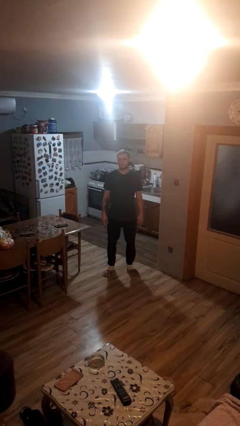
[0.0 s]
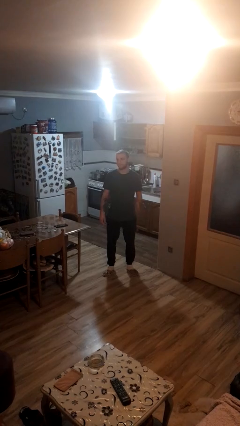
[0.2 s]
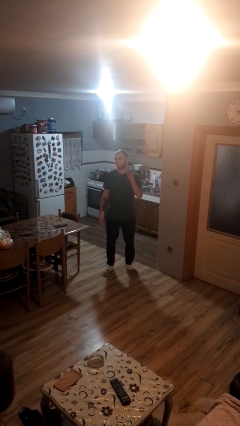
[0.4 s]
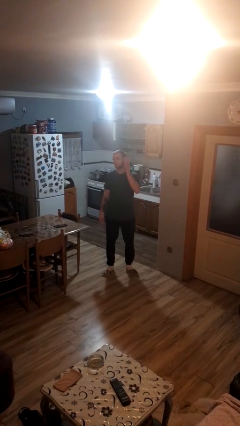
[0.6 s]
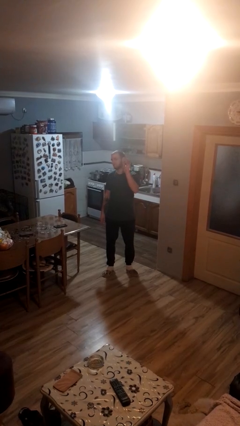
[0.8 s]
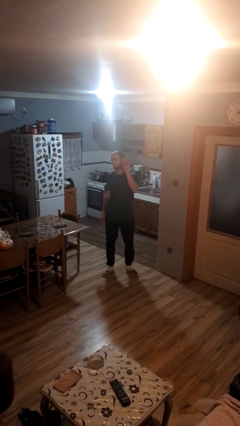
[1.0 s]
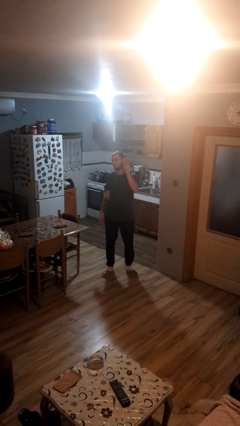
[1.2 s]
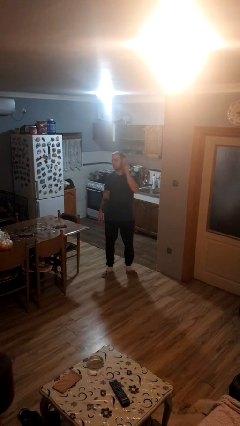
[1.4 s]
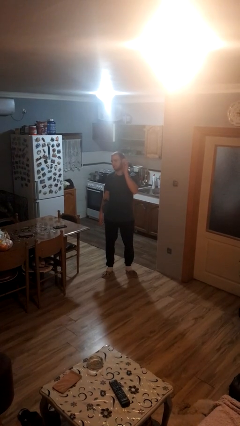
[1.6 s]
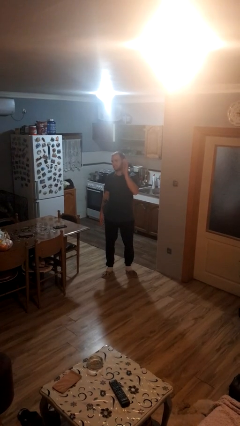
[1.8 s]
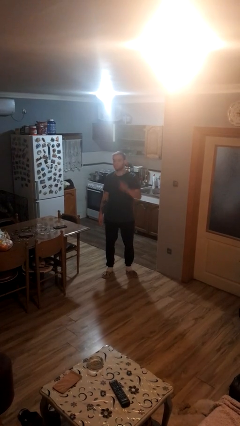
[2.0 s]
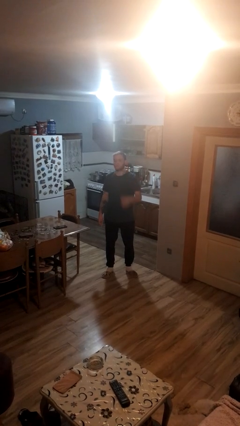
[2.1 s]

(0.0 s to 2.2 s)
person waves at person

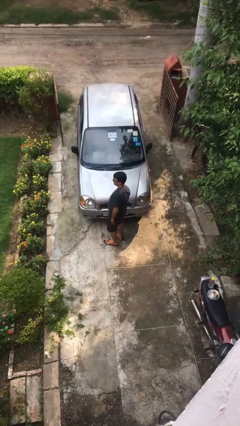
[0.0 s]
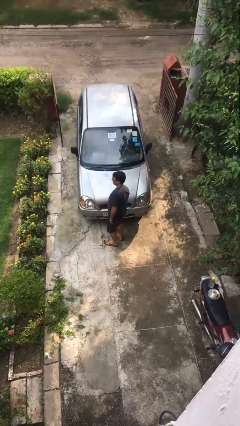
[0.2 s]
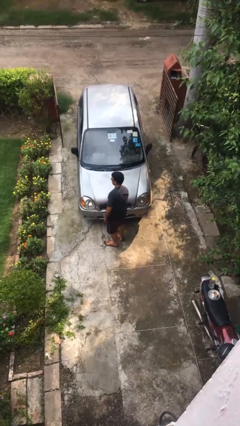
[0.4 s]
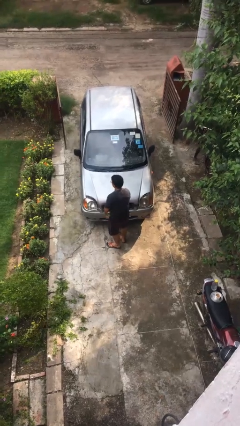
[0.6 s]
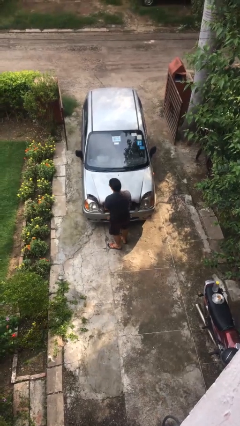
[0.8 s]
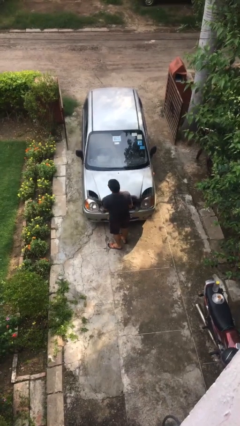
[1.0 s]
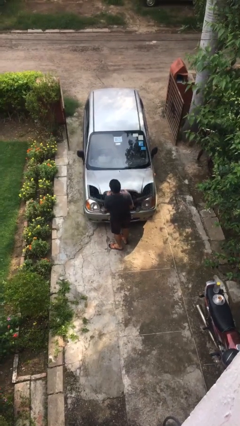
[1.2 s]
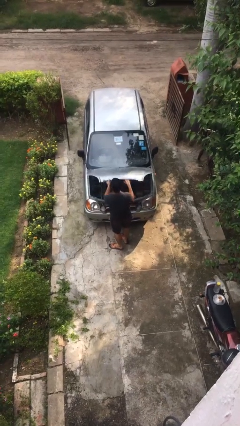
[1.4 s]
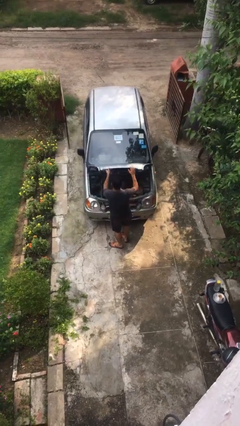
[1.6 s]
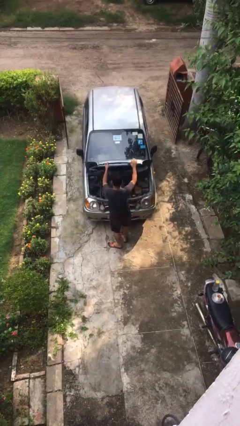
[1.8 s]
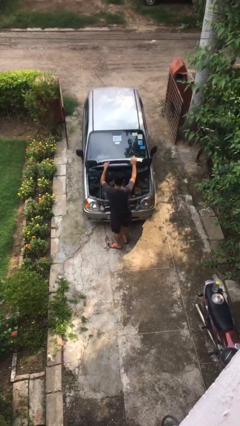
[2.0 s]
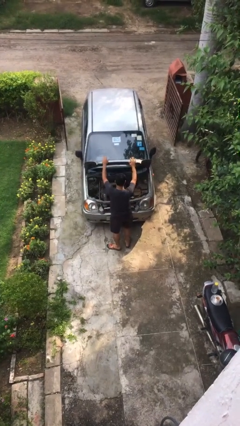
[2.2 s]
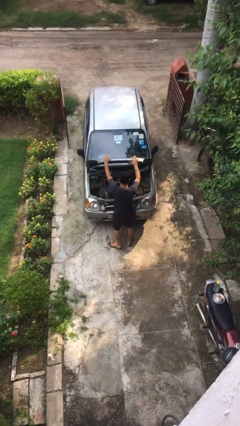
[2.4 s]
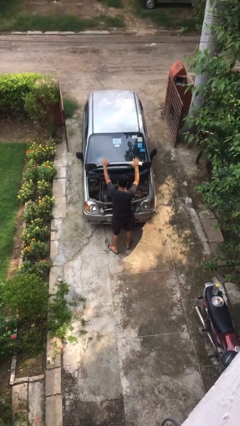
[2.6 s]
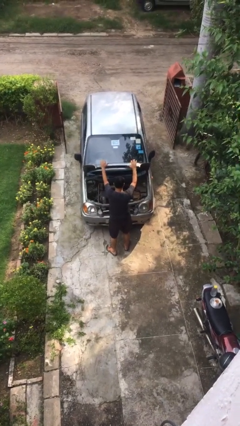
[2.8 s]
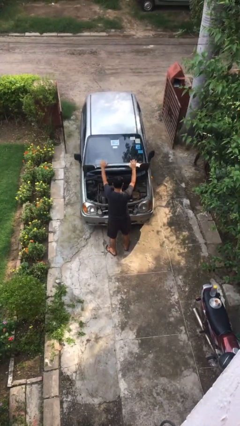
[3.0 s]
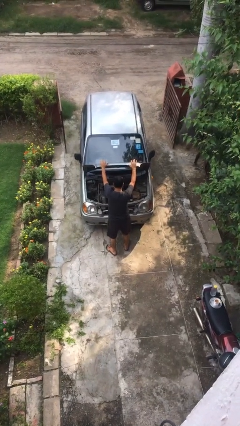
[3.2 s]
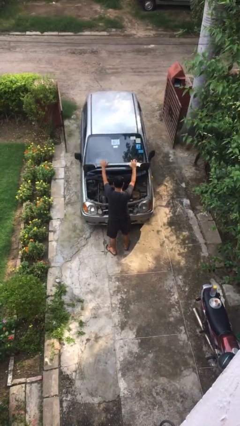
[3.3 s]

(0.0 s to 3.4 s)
person opens car hood

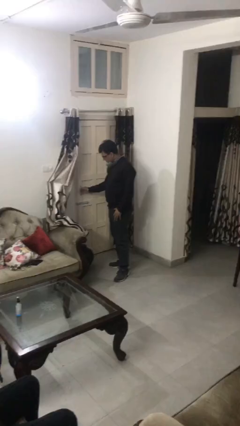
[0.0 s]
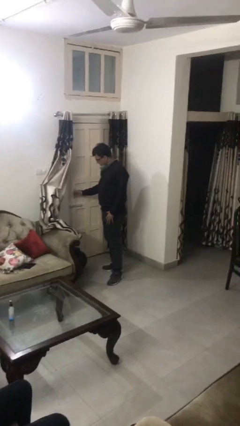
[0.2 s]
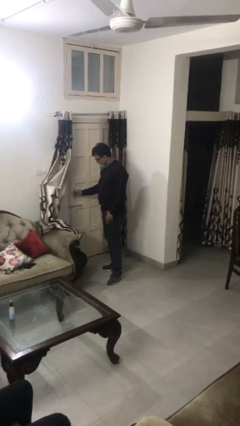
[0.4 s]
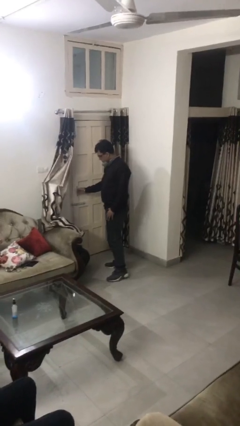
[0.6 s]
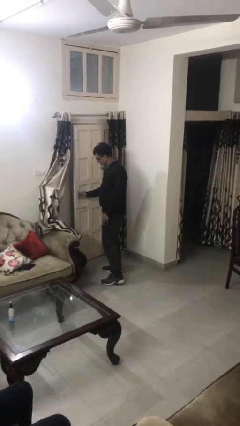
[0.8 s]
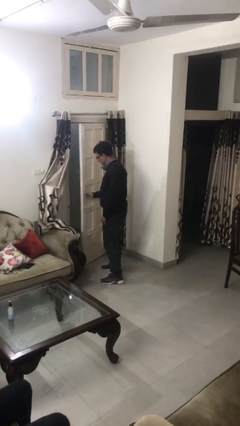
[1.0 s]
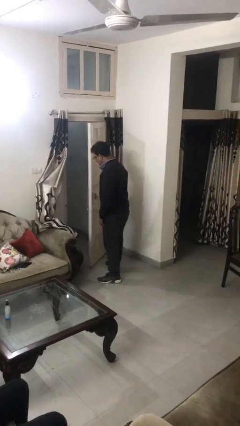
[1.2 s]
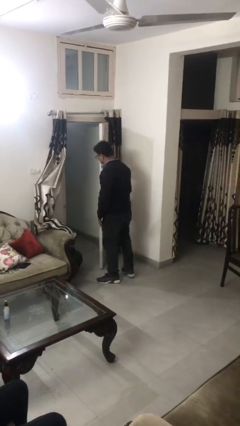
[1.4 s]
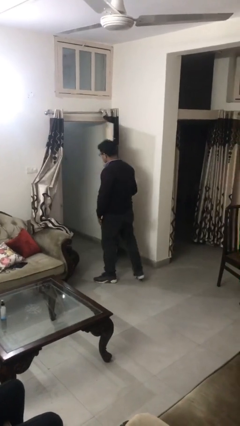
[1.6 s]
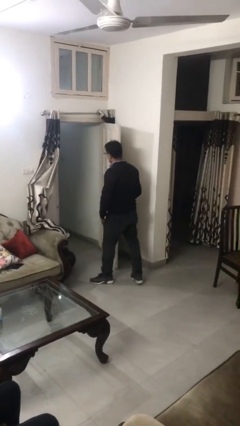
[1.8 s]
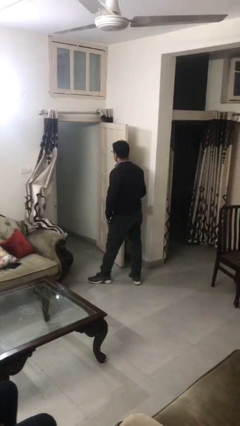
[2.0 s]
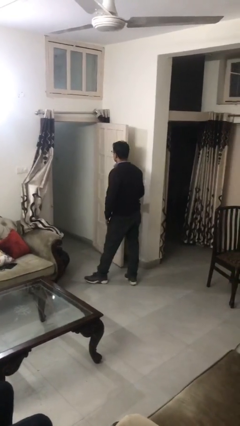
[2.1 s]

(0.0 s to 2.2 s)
person opens facility door

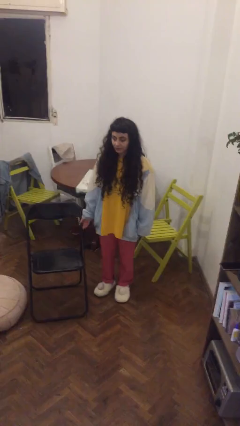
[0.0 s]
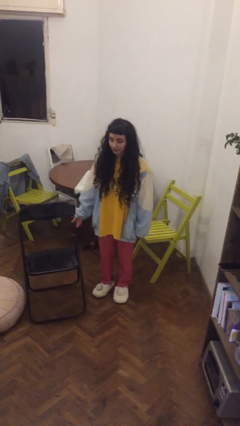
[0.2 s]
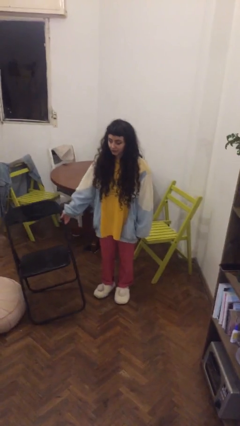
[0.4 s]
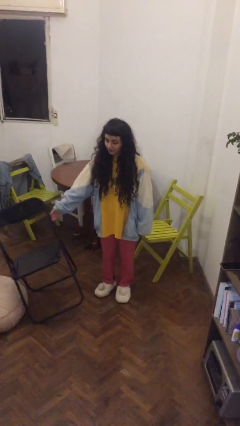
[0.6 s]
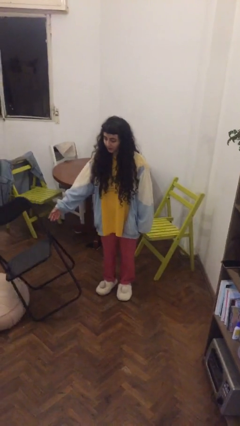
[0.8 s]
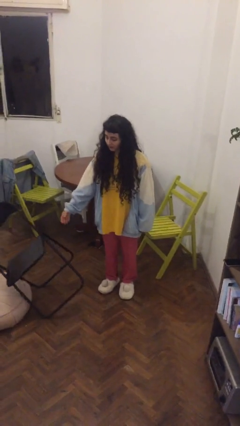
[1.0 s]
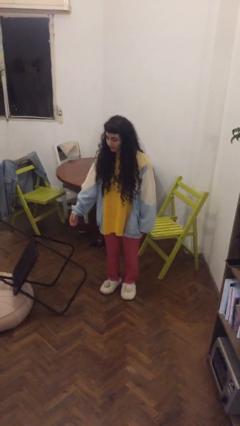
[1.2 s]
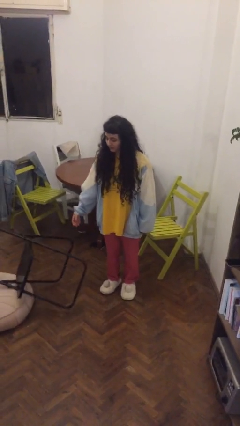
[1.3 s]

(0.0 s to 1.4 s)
person knocks over furniture

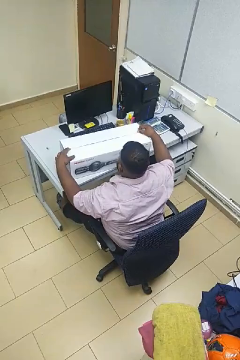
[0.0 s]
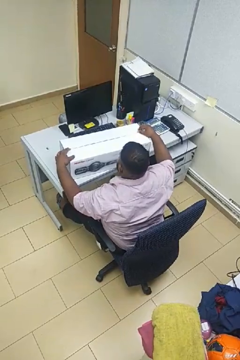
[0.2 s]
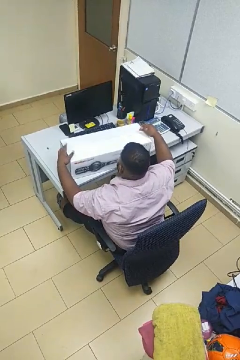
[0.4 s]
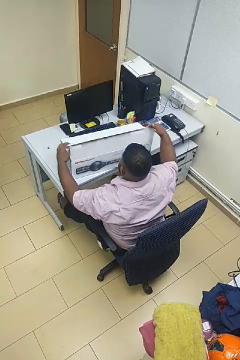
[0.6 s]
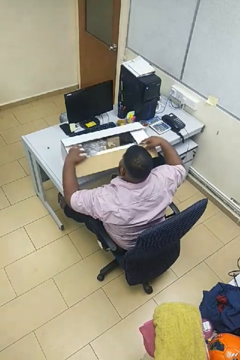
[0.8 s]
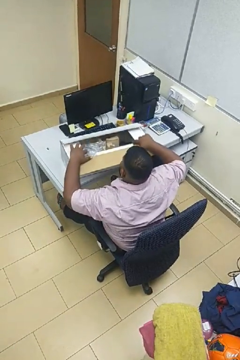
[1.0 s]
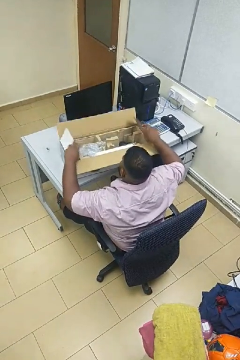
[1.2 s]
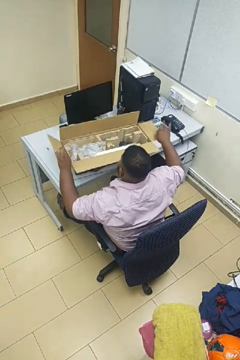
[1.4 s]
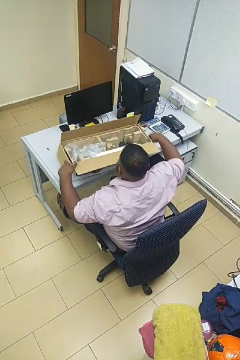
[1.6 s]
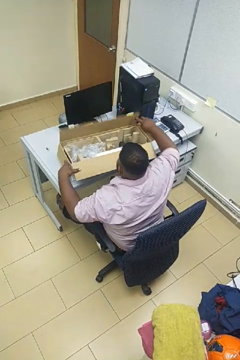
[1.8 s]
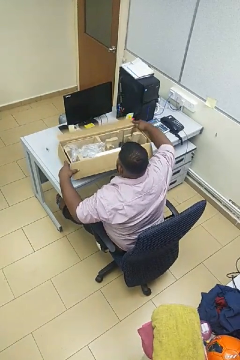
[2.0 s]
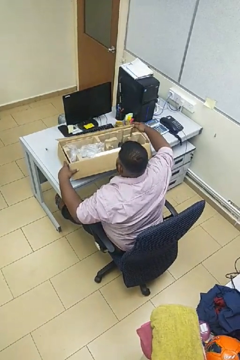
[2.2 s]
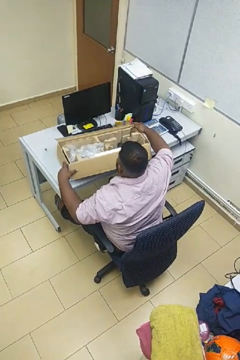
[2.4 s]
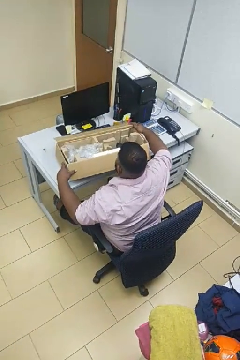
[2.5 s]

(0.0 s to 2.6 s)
person opens box

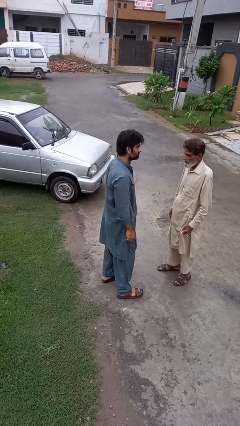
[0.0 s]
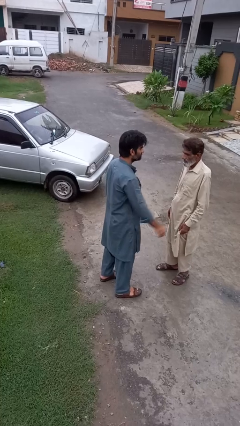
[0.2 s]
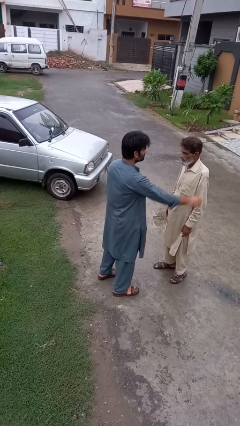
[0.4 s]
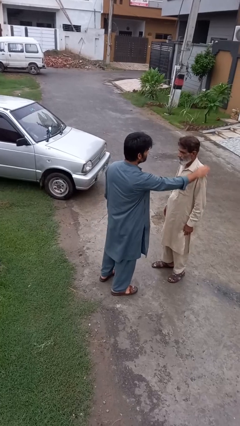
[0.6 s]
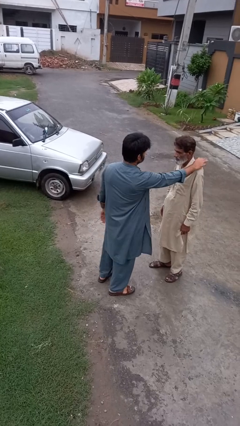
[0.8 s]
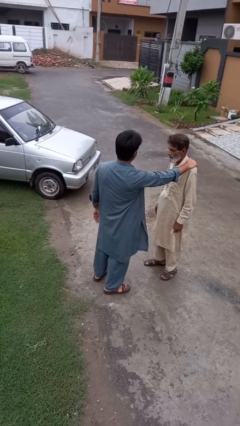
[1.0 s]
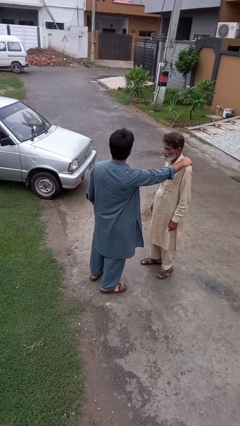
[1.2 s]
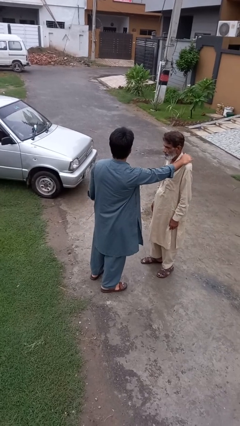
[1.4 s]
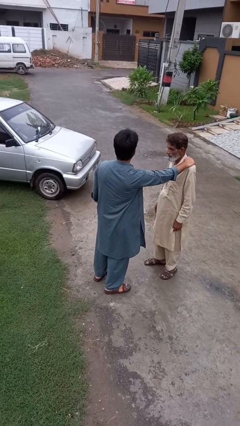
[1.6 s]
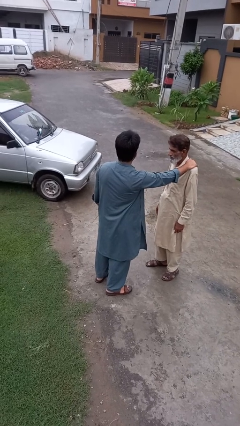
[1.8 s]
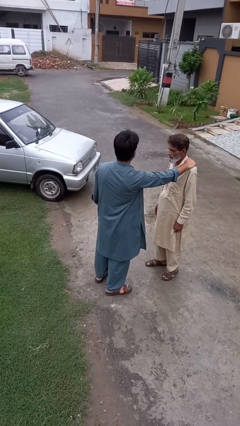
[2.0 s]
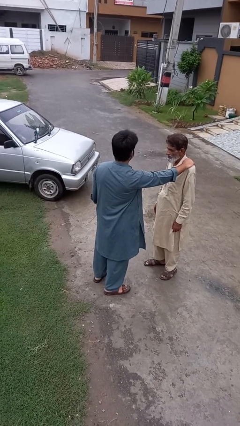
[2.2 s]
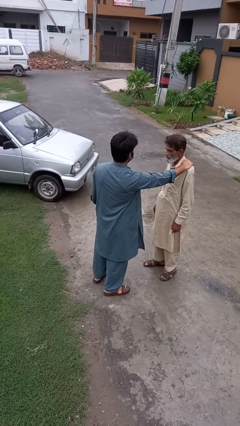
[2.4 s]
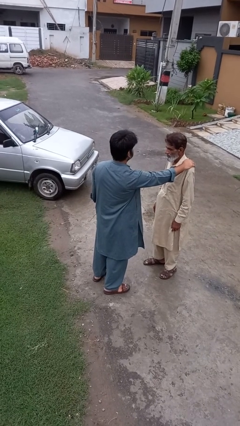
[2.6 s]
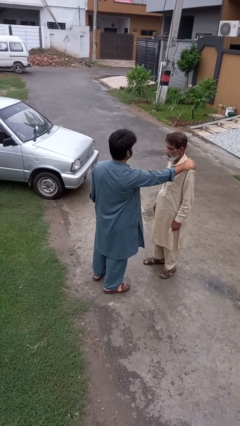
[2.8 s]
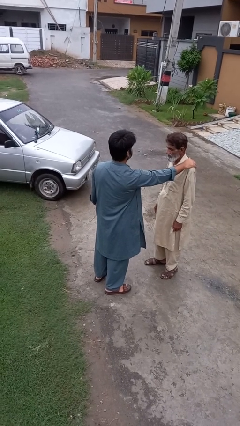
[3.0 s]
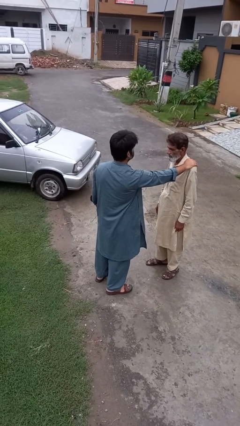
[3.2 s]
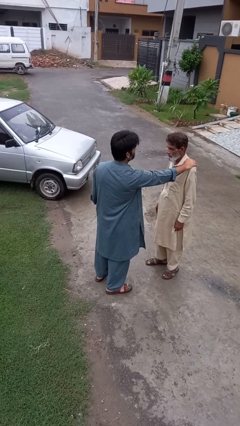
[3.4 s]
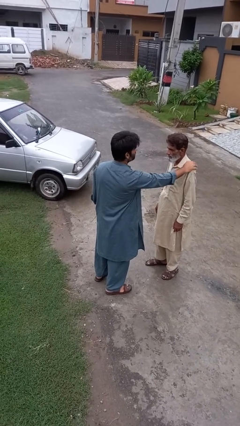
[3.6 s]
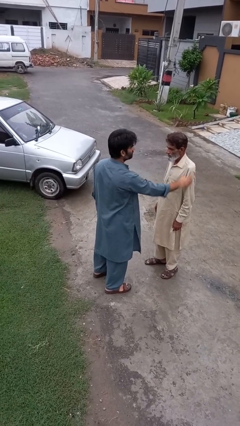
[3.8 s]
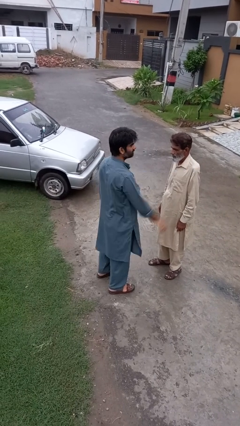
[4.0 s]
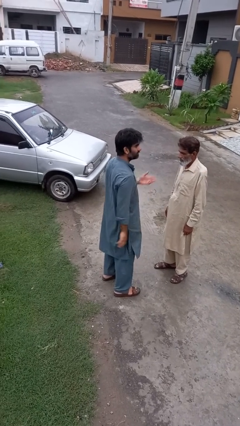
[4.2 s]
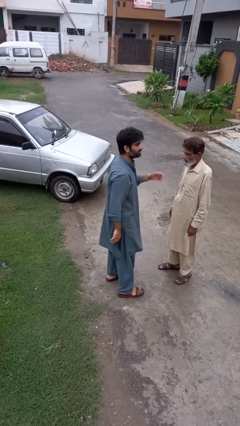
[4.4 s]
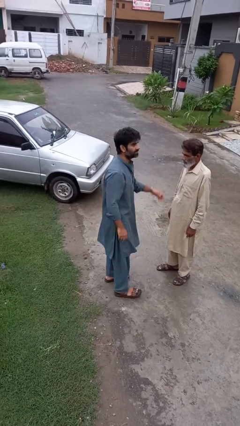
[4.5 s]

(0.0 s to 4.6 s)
person pounds shoulders of person

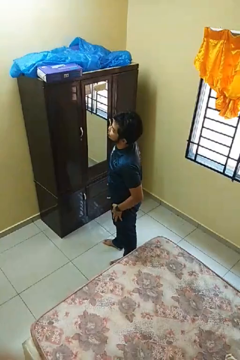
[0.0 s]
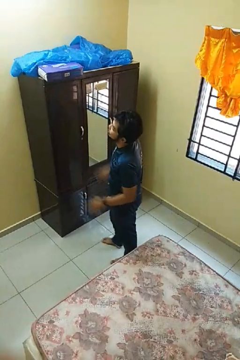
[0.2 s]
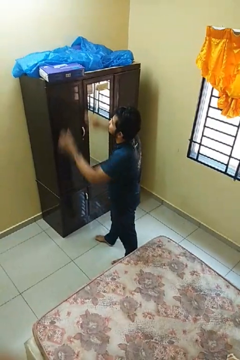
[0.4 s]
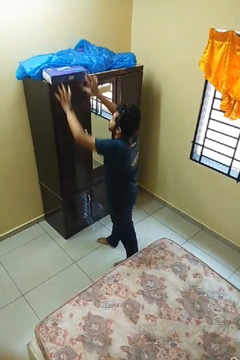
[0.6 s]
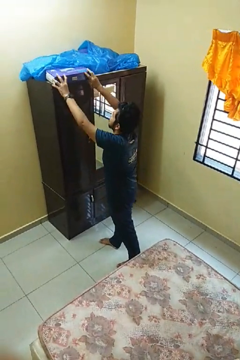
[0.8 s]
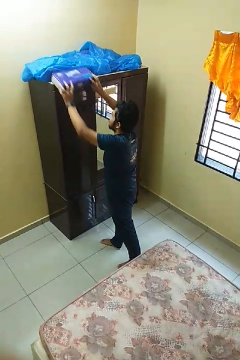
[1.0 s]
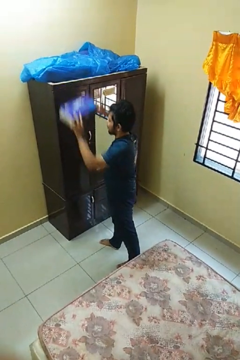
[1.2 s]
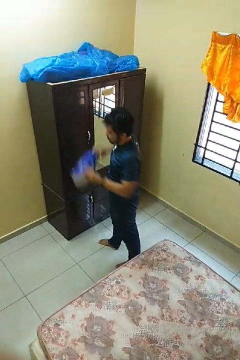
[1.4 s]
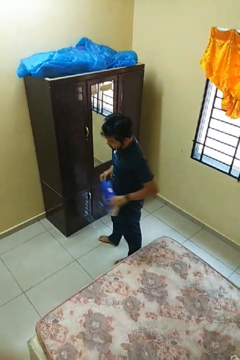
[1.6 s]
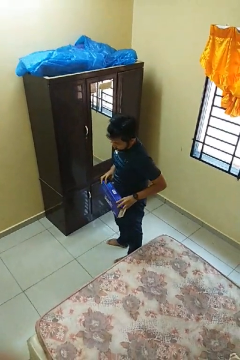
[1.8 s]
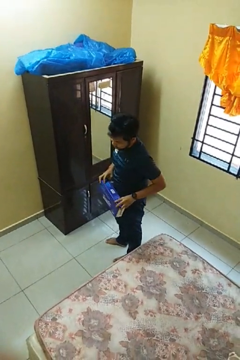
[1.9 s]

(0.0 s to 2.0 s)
person picks up object from countertop
